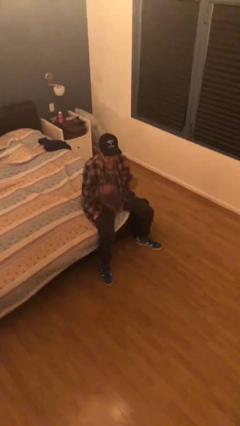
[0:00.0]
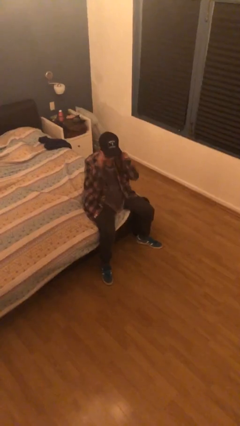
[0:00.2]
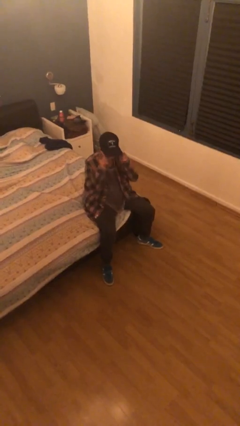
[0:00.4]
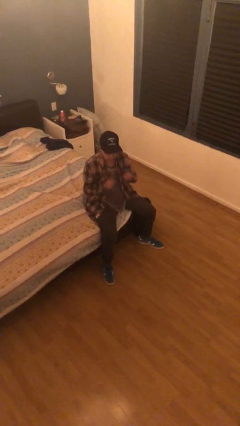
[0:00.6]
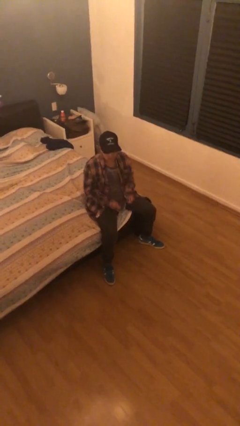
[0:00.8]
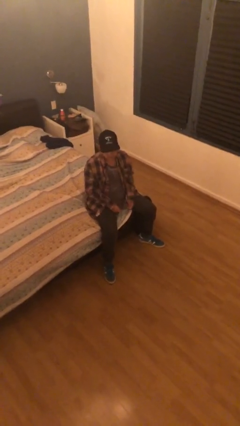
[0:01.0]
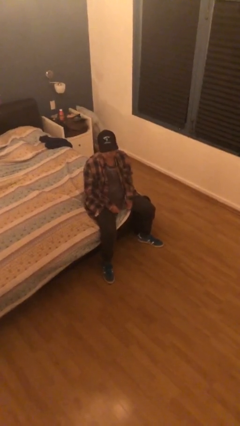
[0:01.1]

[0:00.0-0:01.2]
person takes off glasses

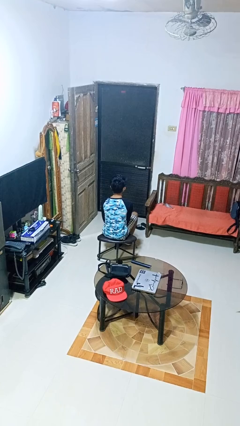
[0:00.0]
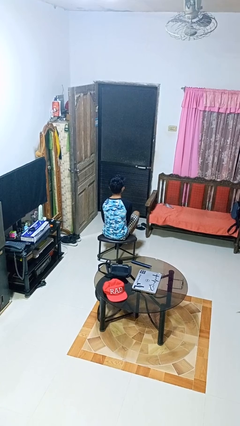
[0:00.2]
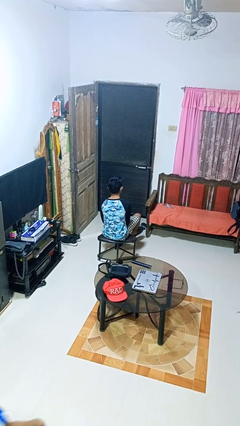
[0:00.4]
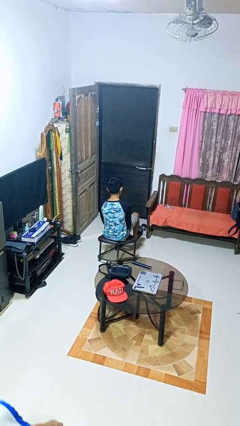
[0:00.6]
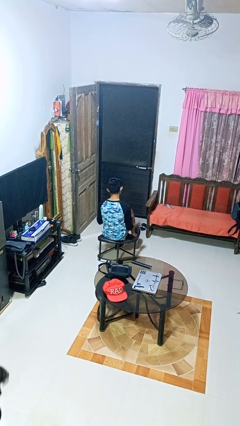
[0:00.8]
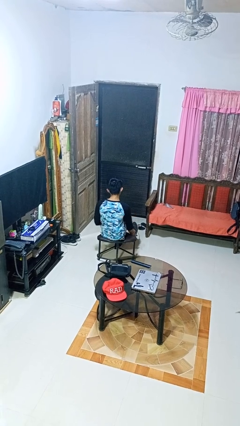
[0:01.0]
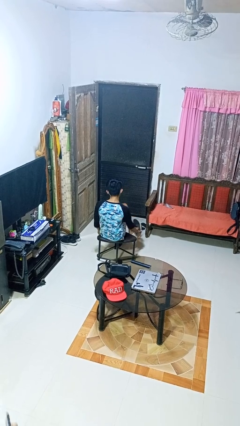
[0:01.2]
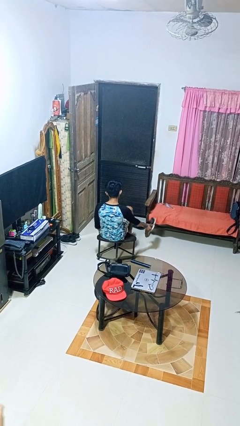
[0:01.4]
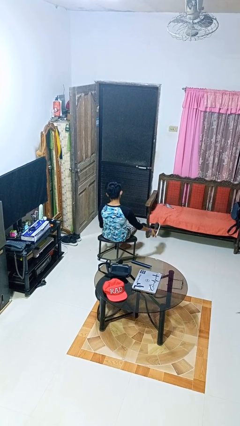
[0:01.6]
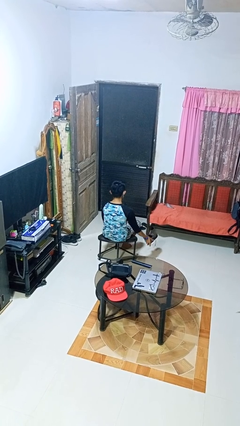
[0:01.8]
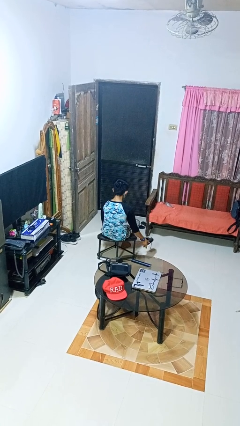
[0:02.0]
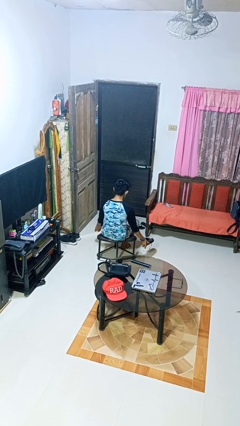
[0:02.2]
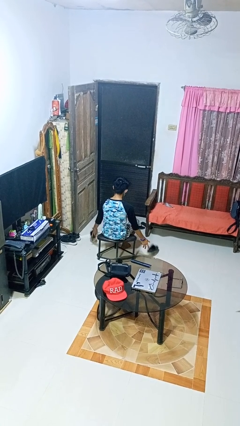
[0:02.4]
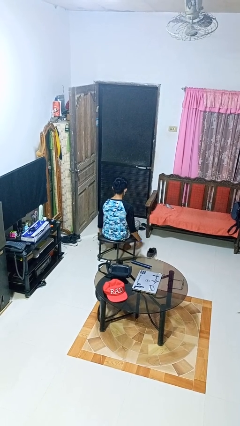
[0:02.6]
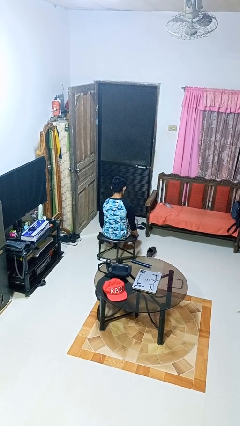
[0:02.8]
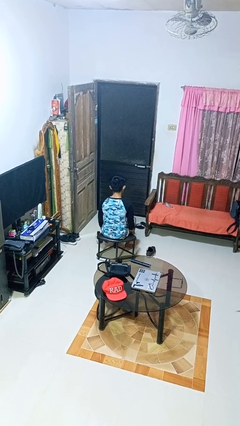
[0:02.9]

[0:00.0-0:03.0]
person takes off shoes

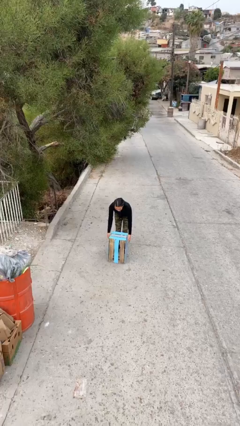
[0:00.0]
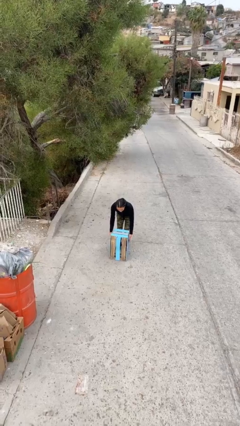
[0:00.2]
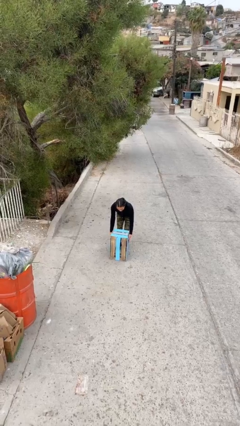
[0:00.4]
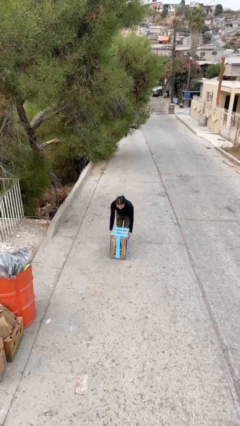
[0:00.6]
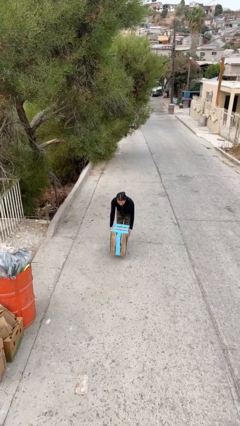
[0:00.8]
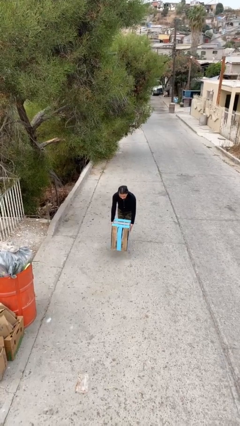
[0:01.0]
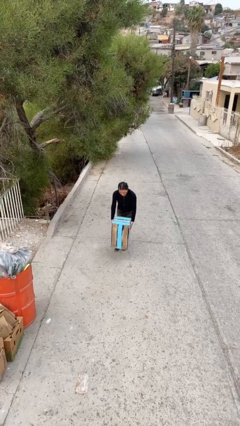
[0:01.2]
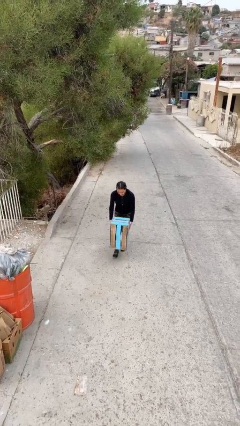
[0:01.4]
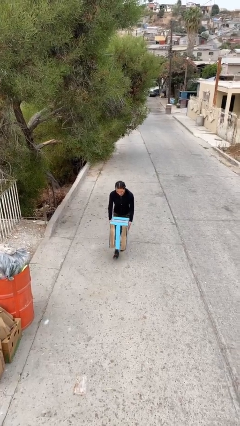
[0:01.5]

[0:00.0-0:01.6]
person picks up object from floor

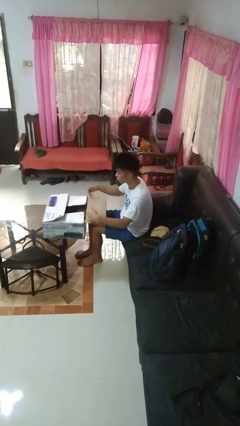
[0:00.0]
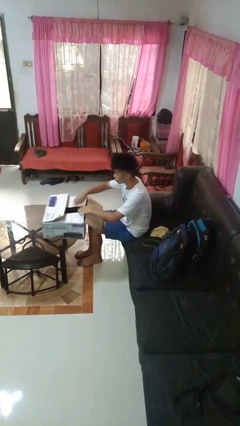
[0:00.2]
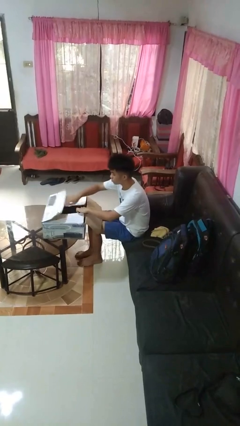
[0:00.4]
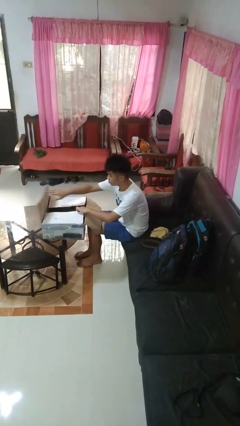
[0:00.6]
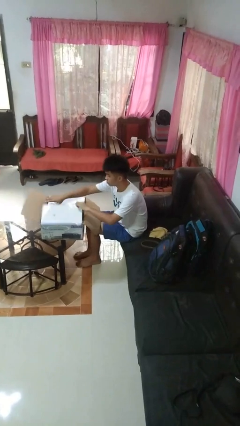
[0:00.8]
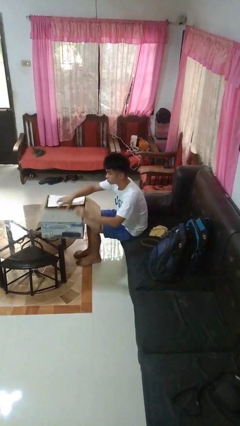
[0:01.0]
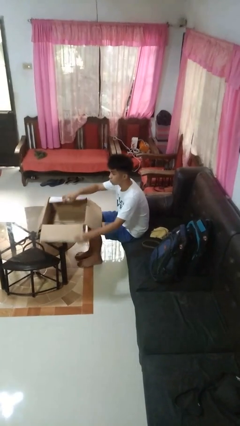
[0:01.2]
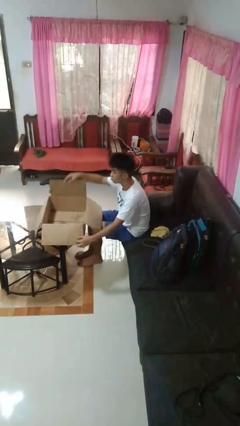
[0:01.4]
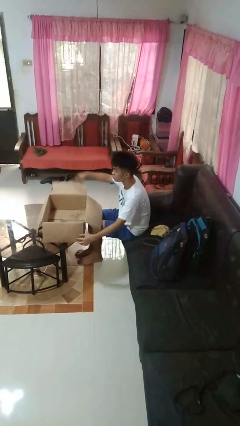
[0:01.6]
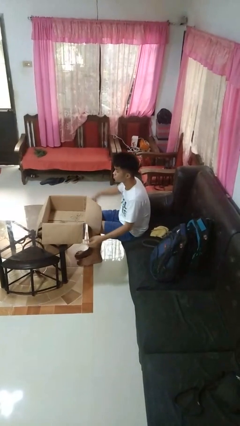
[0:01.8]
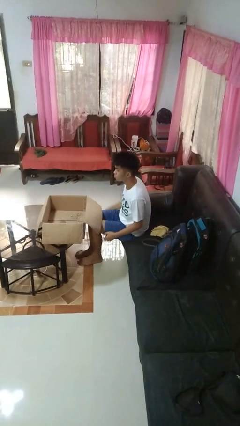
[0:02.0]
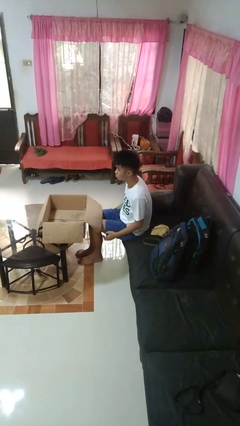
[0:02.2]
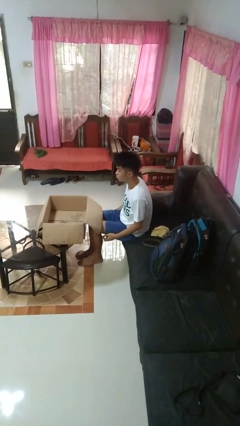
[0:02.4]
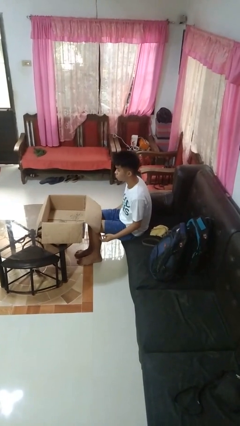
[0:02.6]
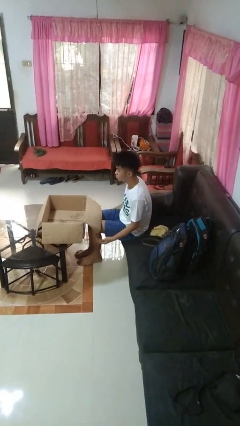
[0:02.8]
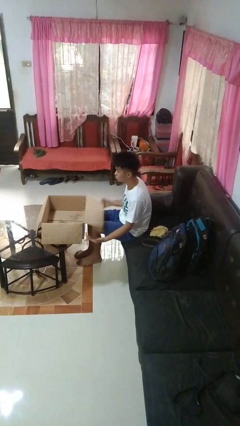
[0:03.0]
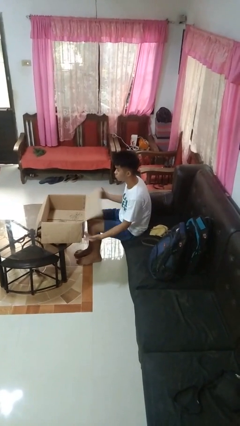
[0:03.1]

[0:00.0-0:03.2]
person opens box

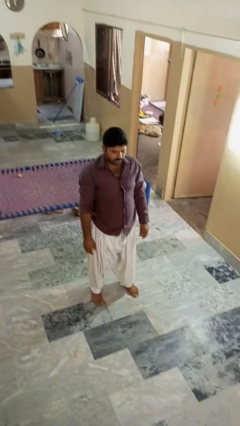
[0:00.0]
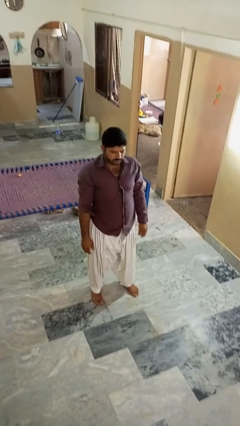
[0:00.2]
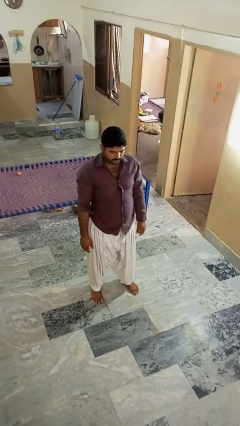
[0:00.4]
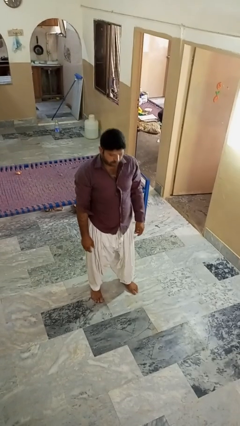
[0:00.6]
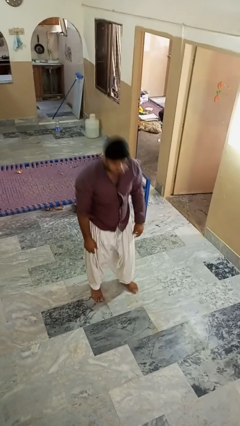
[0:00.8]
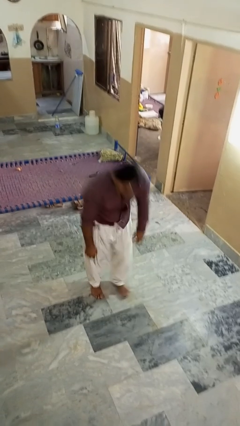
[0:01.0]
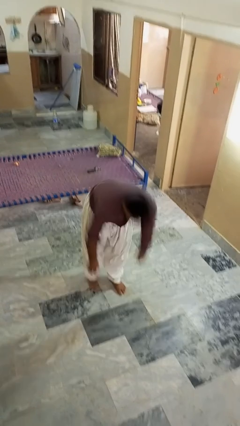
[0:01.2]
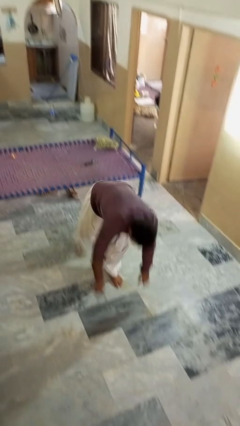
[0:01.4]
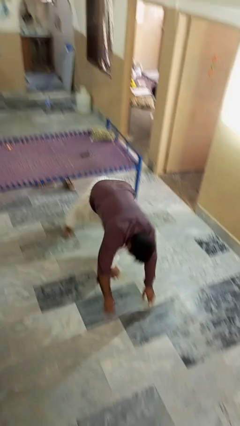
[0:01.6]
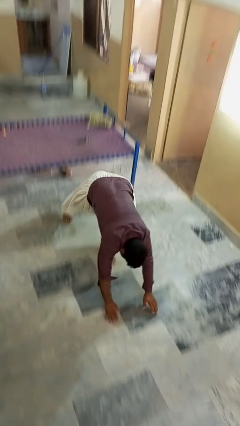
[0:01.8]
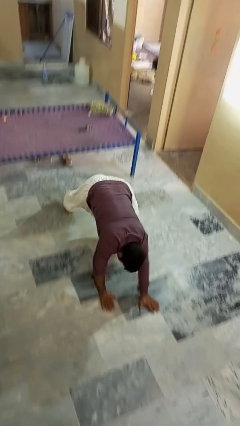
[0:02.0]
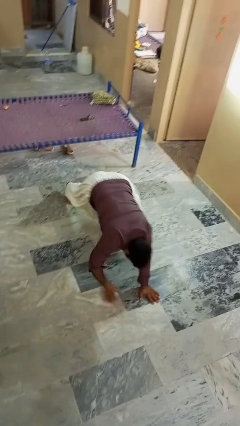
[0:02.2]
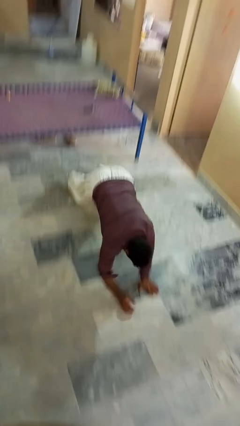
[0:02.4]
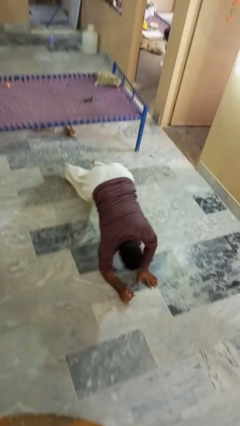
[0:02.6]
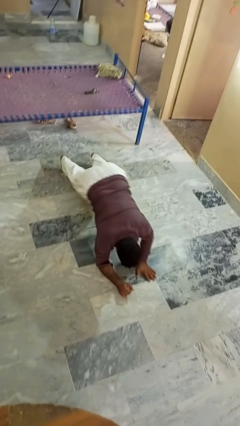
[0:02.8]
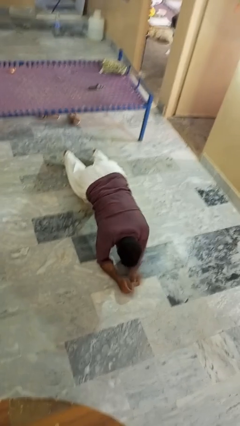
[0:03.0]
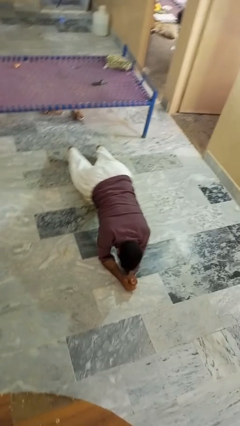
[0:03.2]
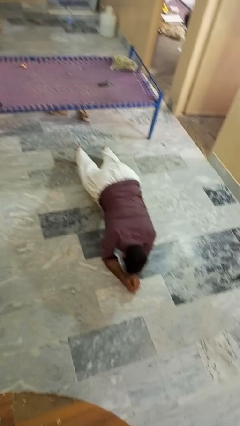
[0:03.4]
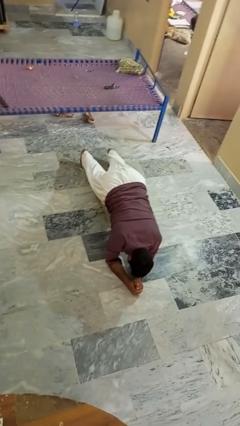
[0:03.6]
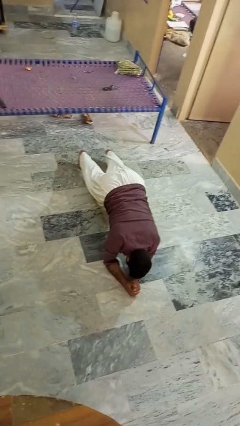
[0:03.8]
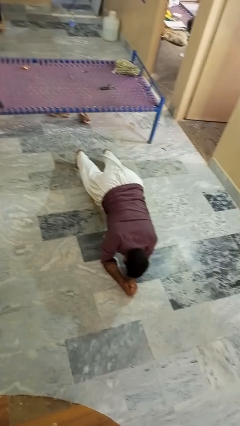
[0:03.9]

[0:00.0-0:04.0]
person exercises with plank

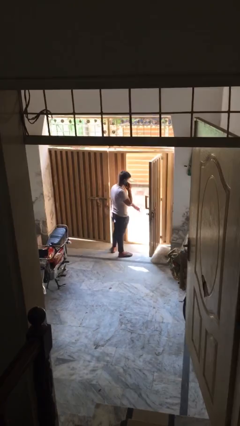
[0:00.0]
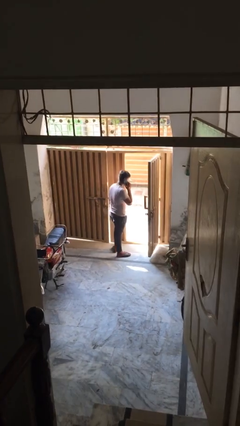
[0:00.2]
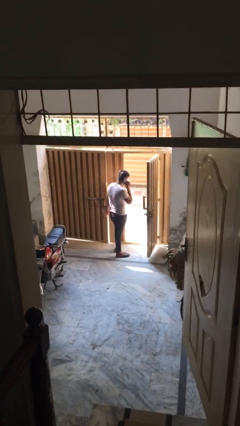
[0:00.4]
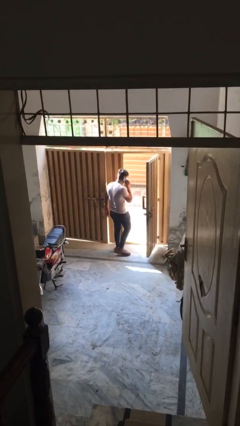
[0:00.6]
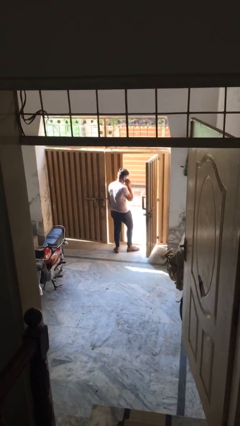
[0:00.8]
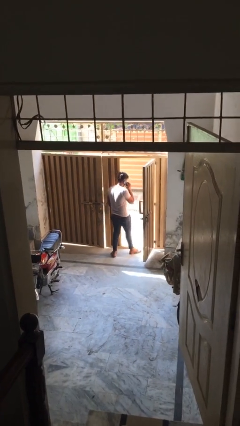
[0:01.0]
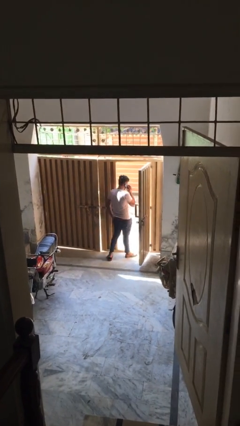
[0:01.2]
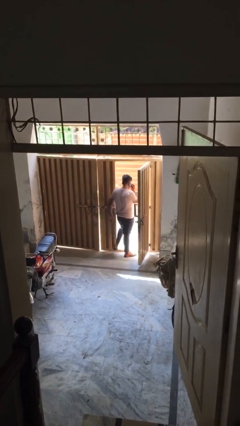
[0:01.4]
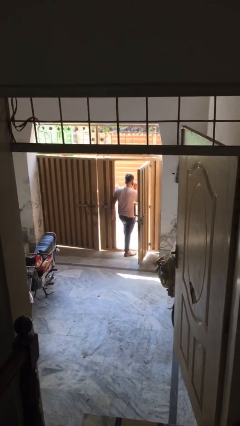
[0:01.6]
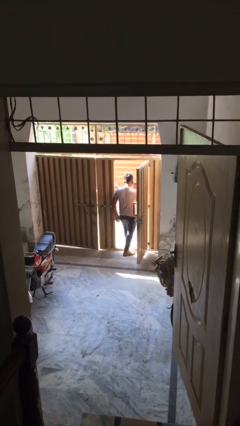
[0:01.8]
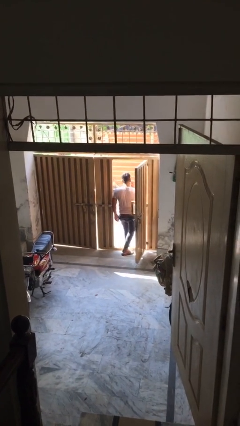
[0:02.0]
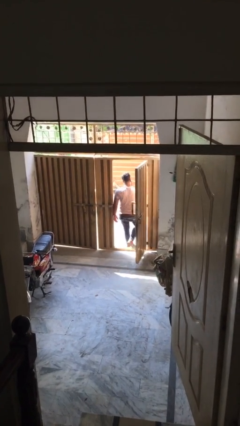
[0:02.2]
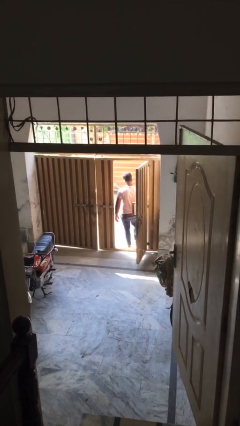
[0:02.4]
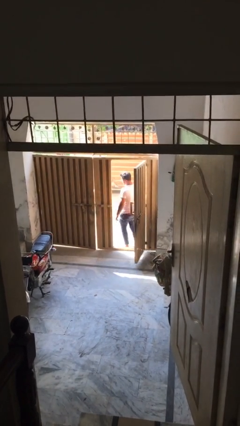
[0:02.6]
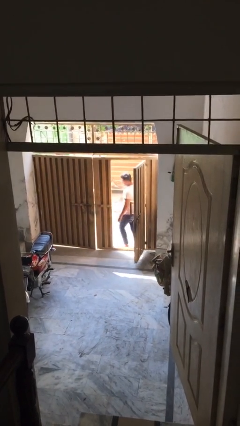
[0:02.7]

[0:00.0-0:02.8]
person exits scene through structure

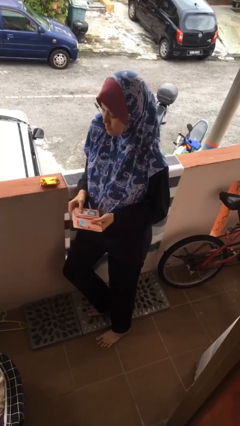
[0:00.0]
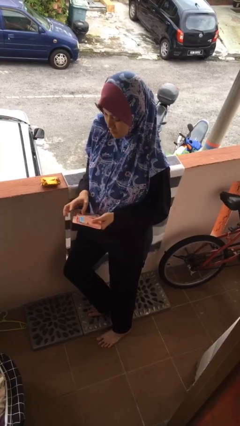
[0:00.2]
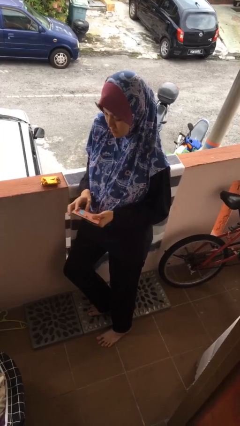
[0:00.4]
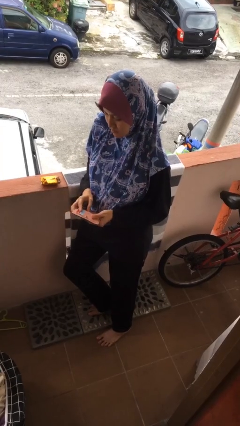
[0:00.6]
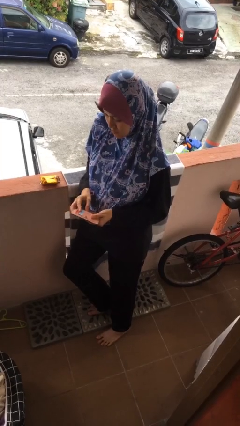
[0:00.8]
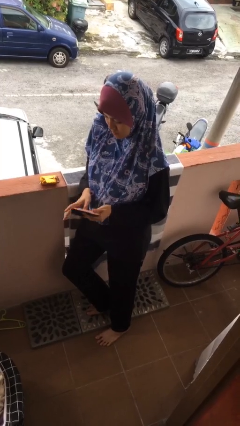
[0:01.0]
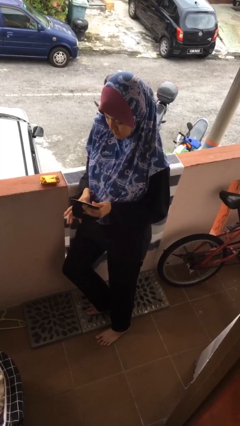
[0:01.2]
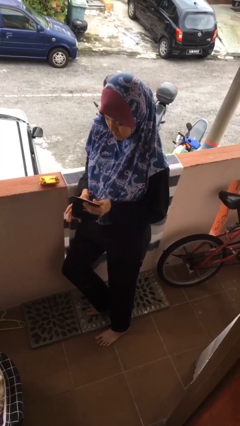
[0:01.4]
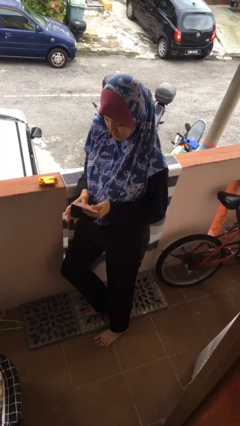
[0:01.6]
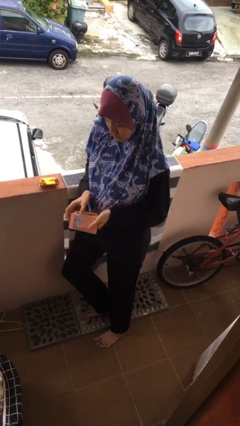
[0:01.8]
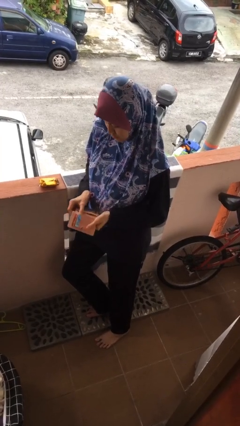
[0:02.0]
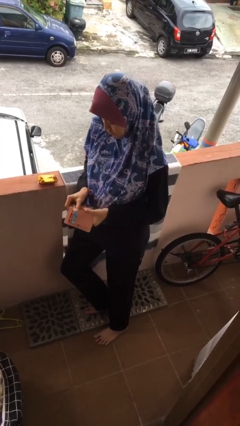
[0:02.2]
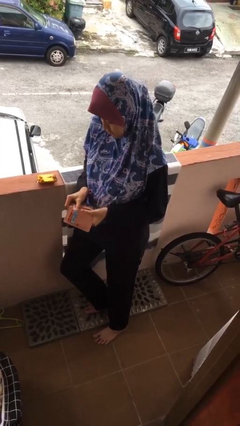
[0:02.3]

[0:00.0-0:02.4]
person searches in purse
